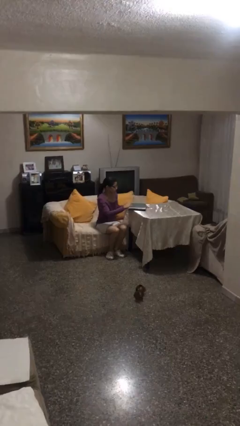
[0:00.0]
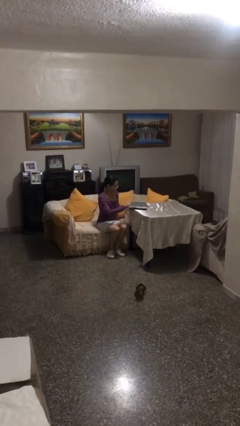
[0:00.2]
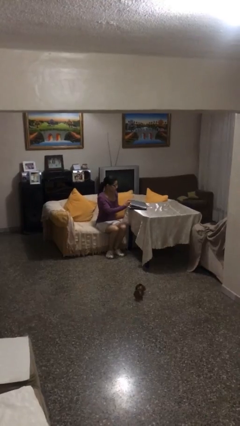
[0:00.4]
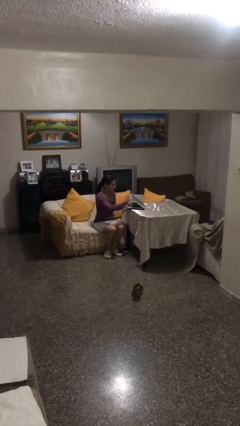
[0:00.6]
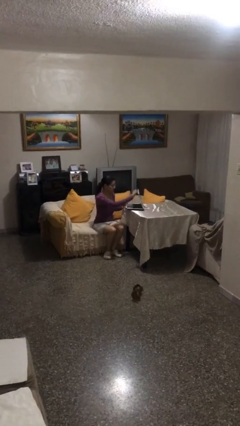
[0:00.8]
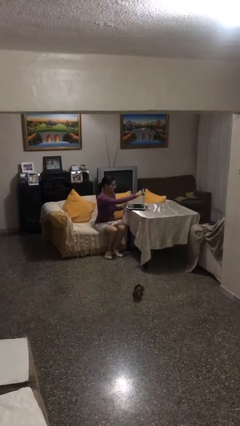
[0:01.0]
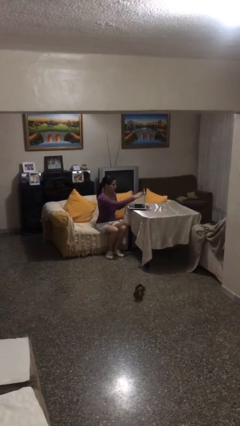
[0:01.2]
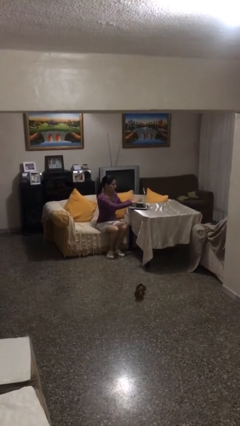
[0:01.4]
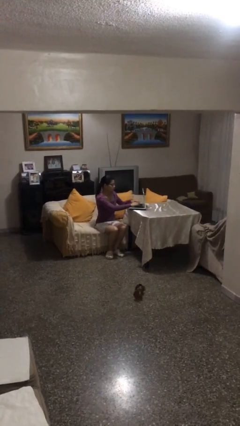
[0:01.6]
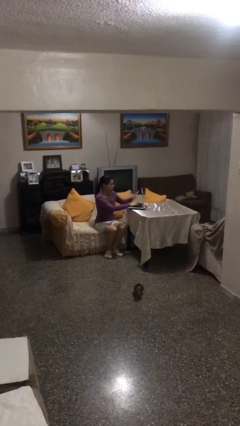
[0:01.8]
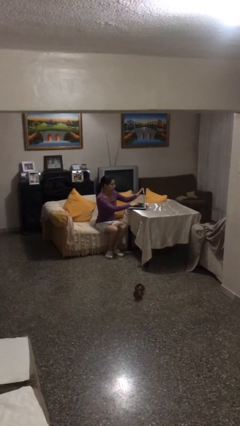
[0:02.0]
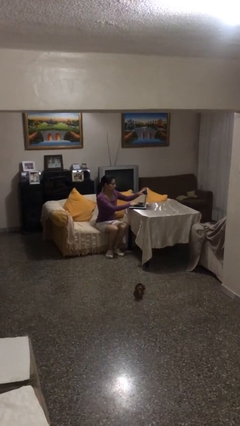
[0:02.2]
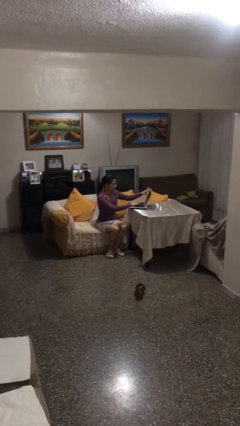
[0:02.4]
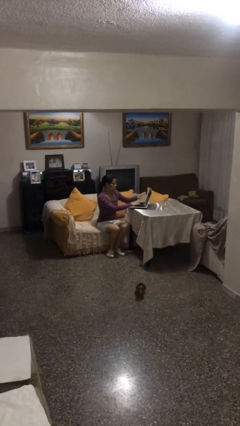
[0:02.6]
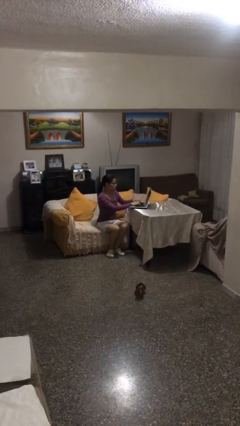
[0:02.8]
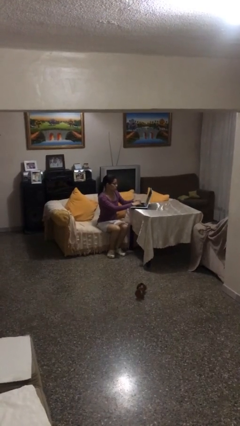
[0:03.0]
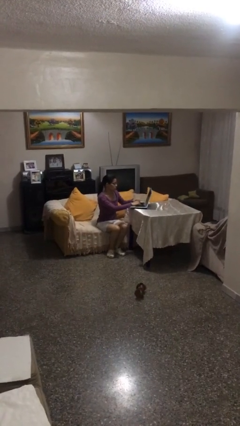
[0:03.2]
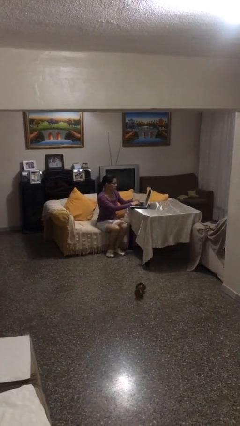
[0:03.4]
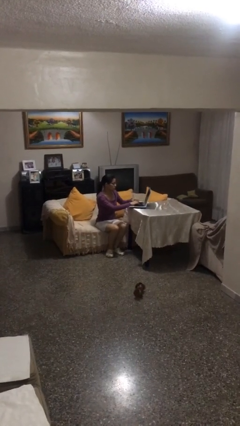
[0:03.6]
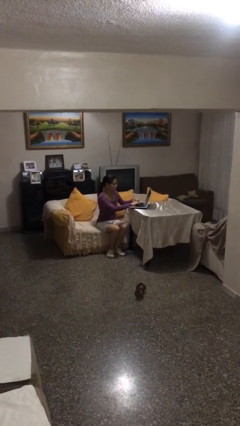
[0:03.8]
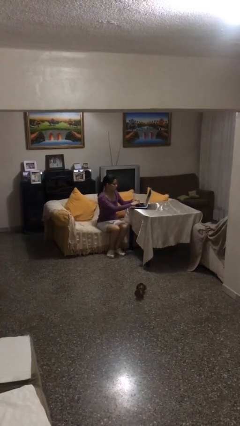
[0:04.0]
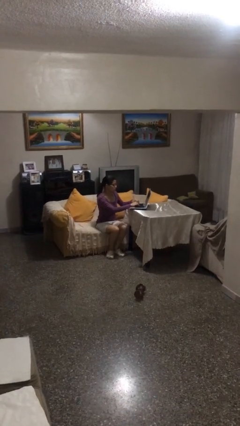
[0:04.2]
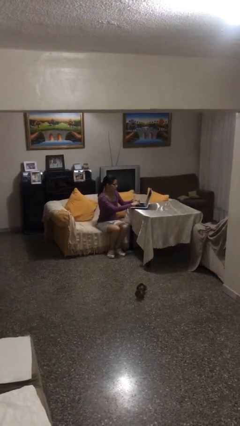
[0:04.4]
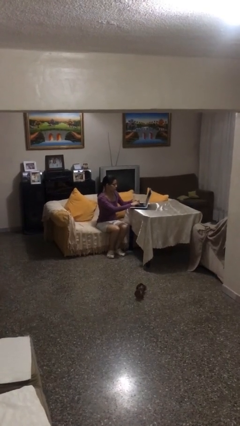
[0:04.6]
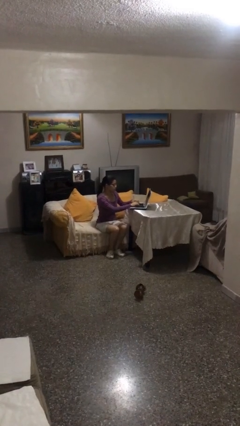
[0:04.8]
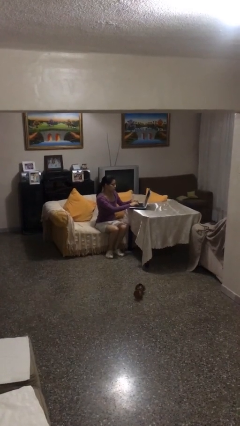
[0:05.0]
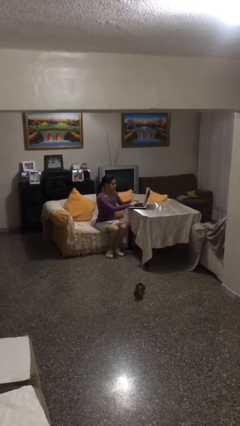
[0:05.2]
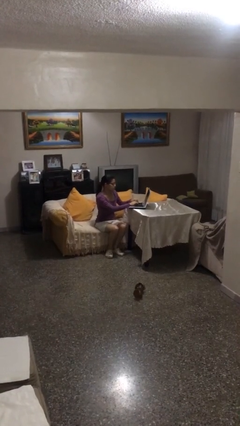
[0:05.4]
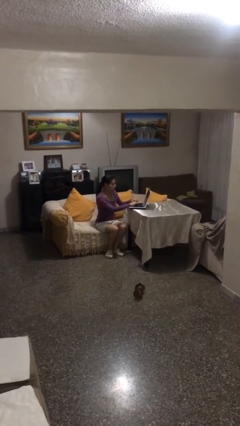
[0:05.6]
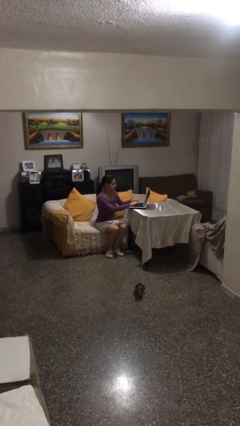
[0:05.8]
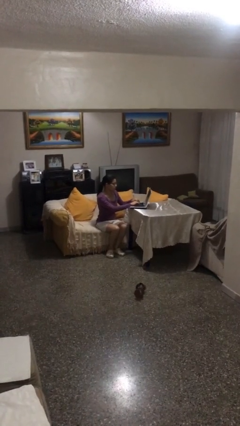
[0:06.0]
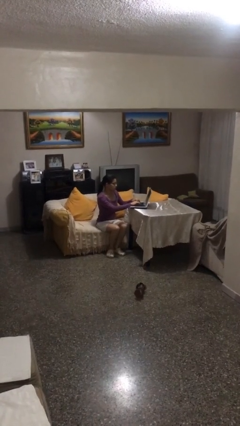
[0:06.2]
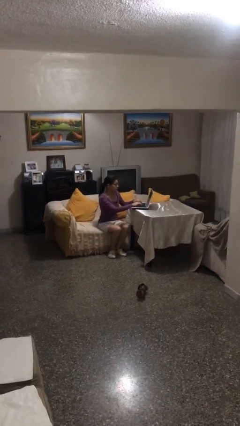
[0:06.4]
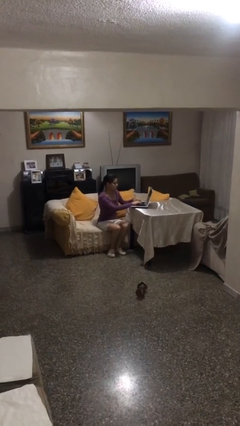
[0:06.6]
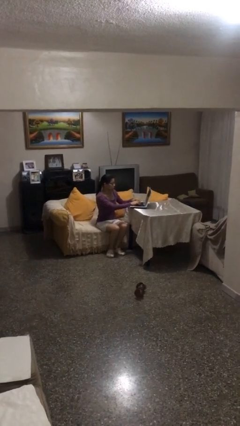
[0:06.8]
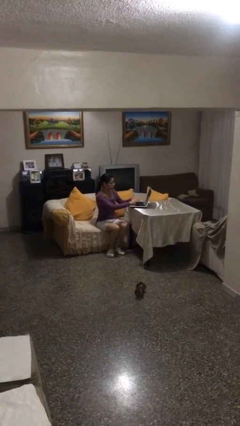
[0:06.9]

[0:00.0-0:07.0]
person interacts with laptop

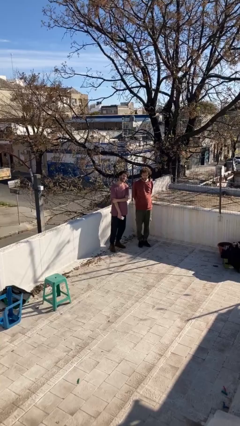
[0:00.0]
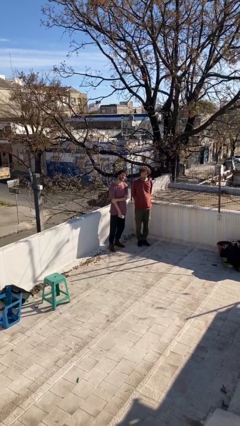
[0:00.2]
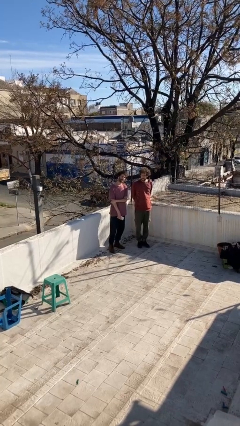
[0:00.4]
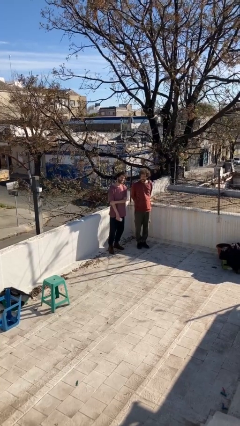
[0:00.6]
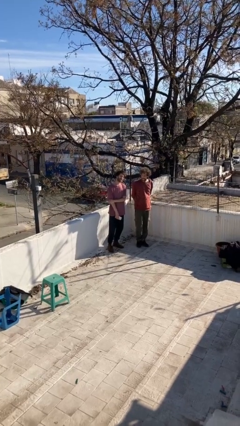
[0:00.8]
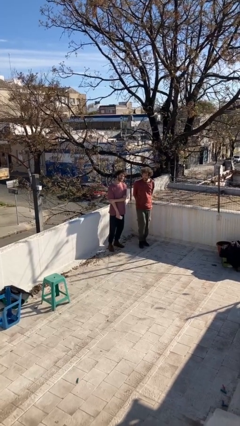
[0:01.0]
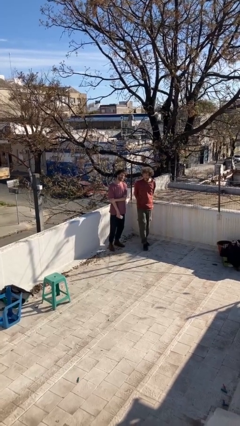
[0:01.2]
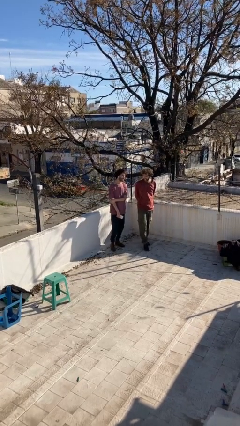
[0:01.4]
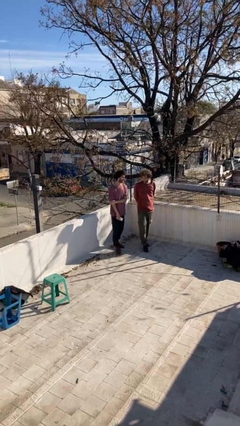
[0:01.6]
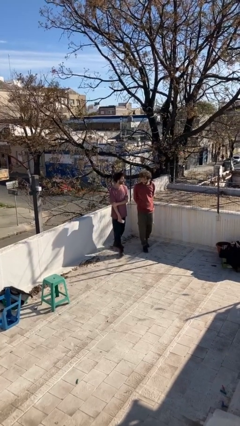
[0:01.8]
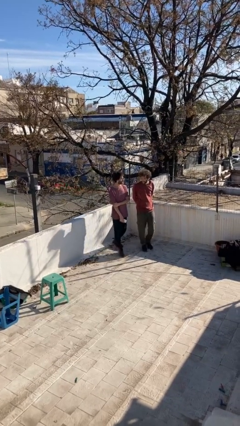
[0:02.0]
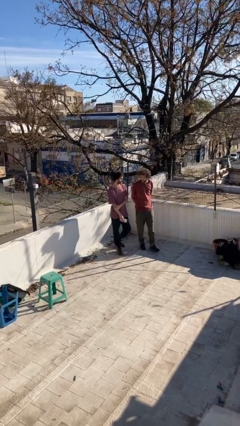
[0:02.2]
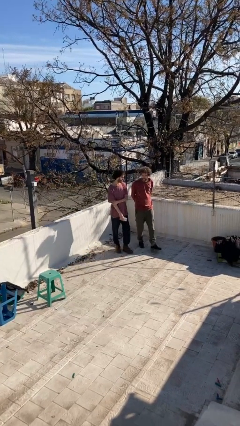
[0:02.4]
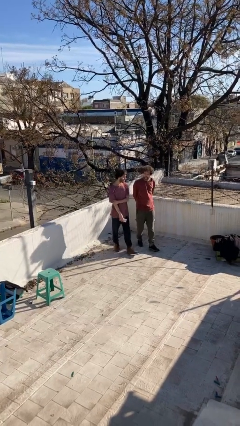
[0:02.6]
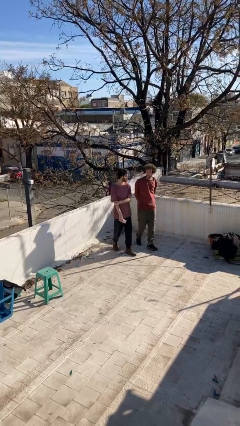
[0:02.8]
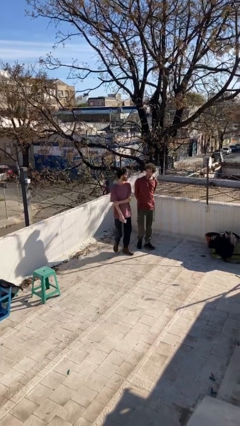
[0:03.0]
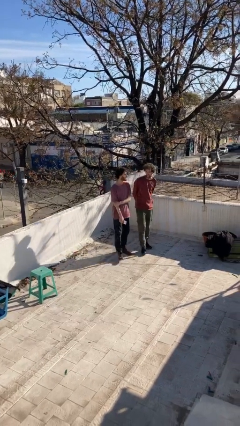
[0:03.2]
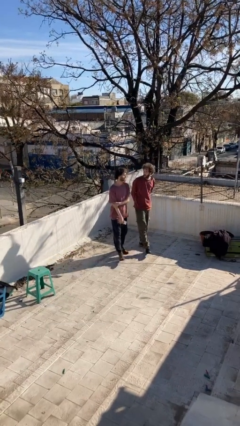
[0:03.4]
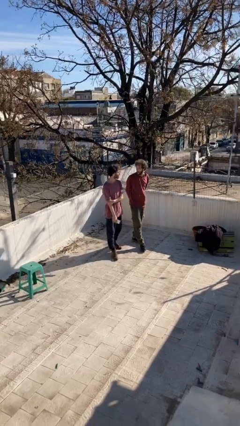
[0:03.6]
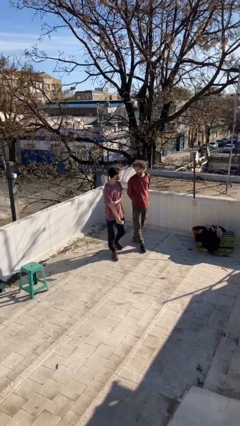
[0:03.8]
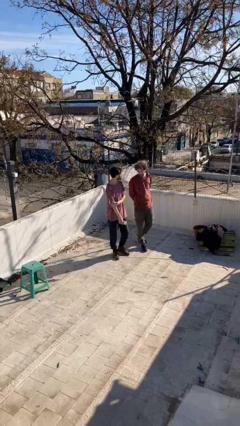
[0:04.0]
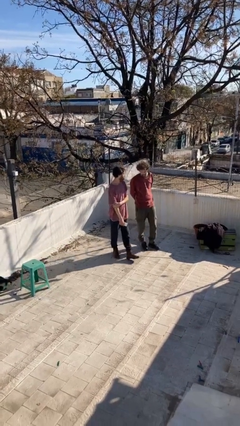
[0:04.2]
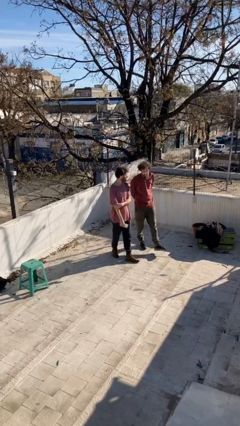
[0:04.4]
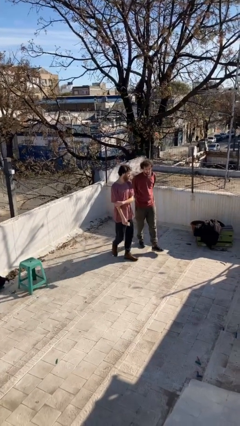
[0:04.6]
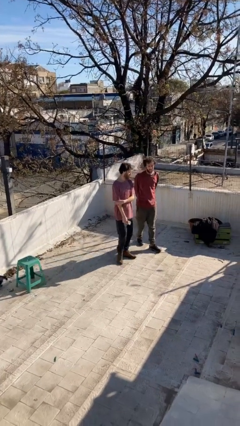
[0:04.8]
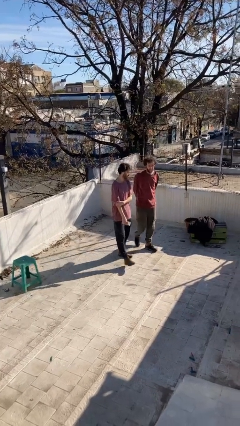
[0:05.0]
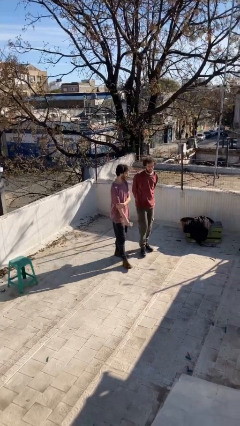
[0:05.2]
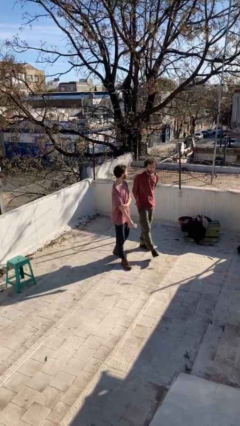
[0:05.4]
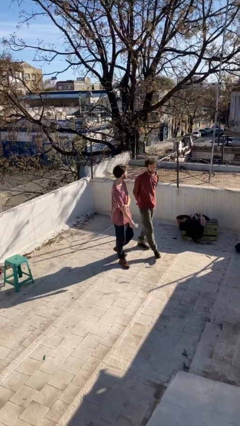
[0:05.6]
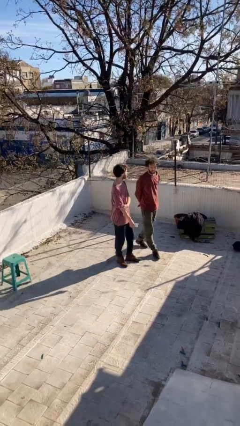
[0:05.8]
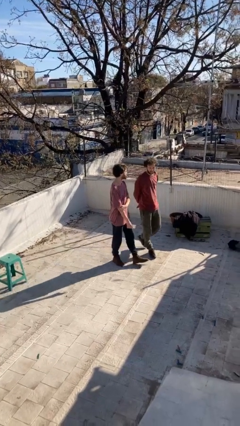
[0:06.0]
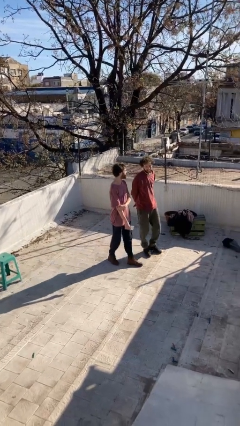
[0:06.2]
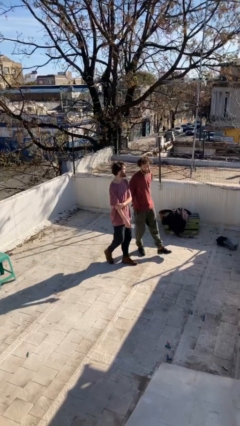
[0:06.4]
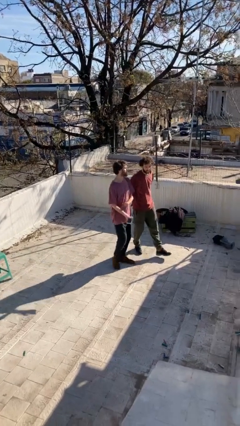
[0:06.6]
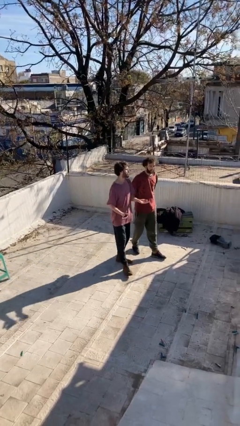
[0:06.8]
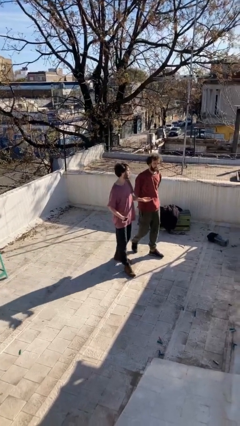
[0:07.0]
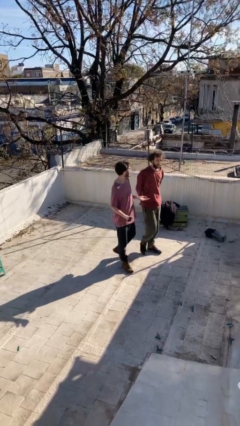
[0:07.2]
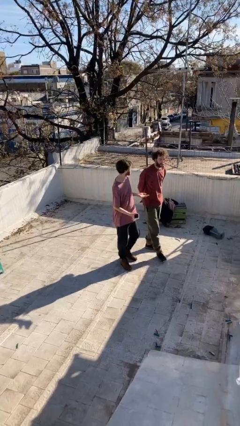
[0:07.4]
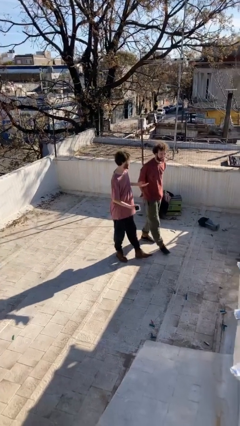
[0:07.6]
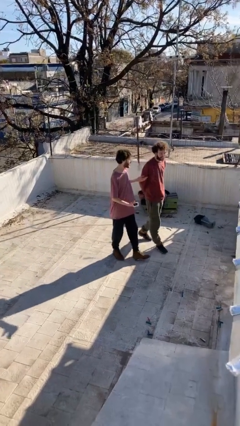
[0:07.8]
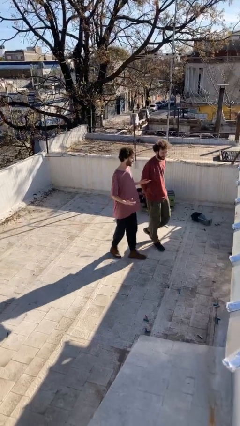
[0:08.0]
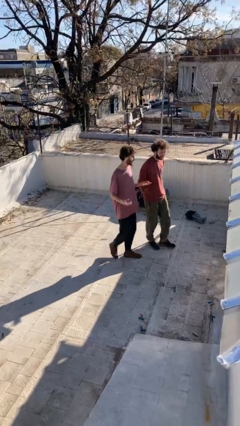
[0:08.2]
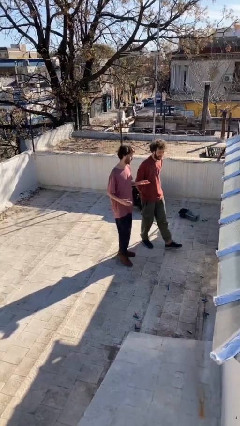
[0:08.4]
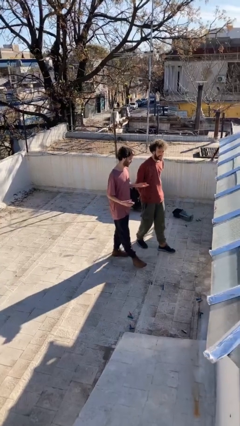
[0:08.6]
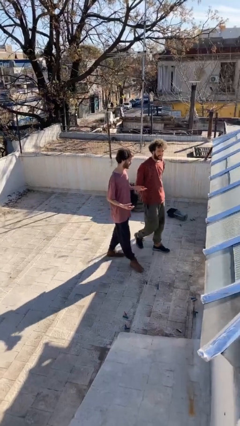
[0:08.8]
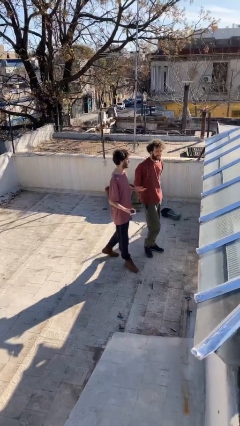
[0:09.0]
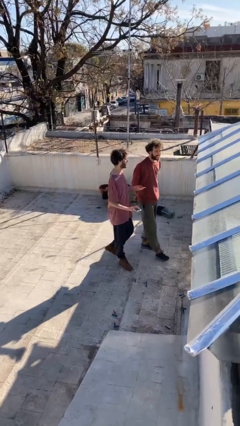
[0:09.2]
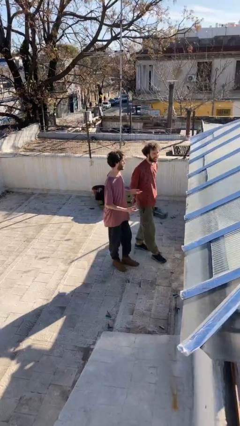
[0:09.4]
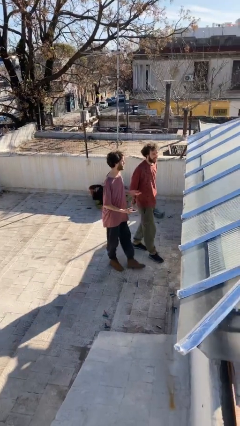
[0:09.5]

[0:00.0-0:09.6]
person talks to person

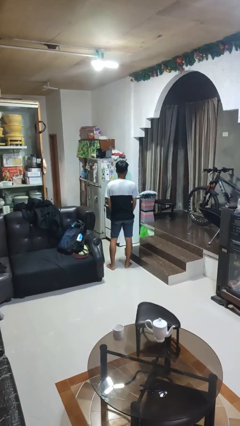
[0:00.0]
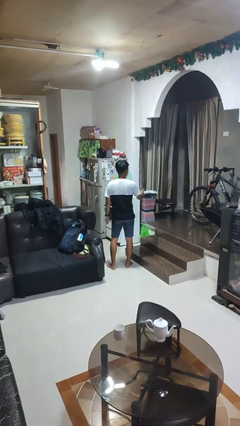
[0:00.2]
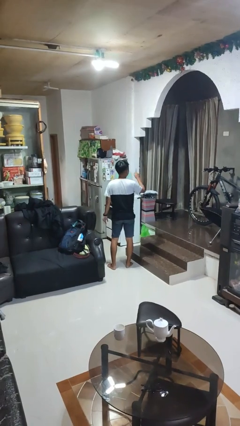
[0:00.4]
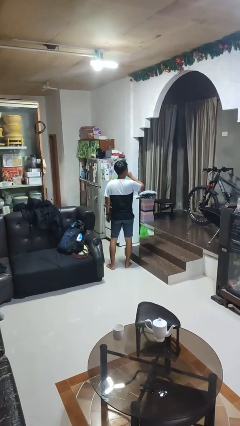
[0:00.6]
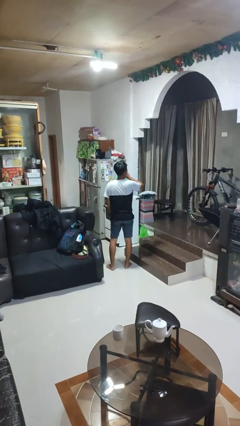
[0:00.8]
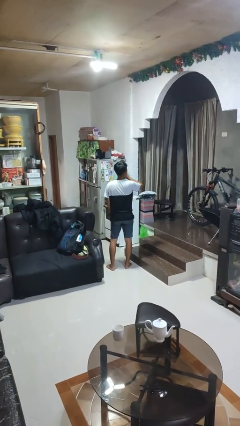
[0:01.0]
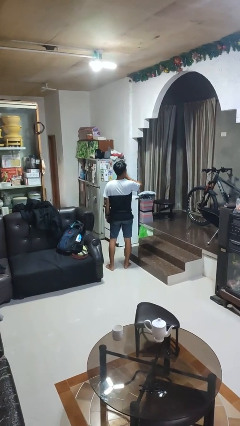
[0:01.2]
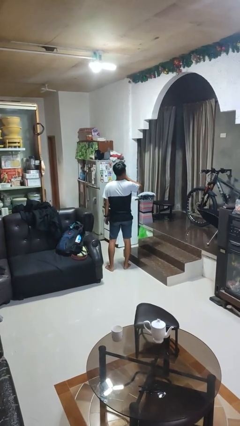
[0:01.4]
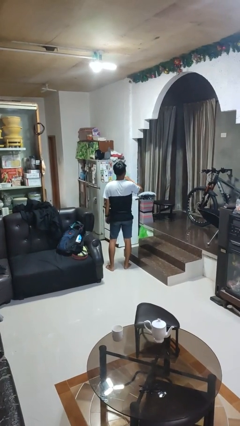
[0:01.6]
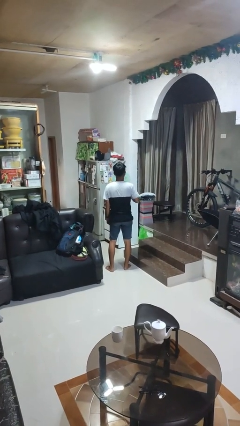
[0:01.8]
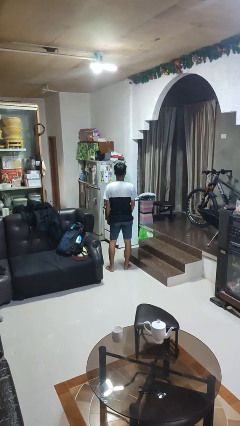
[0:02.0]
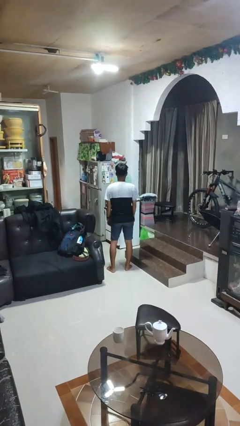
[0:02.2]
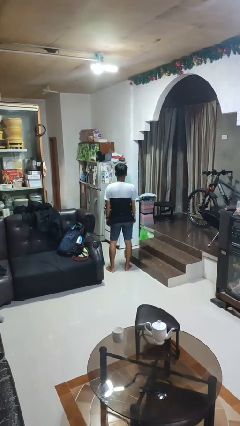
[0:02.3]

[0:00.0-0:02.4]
person gestures be quiet
